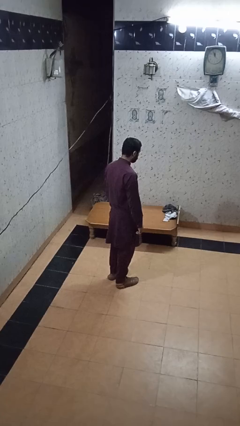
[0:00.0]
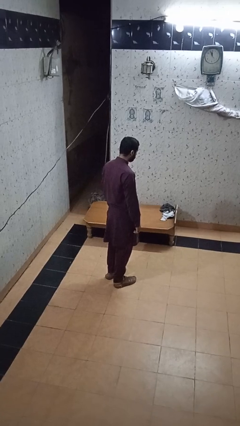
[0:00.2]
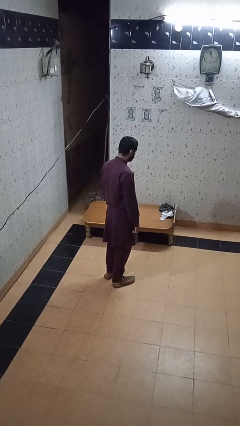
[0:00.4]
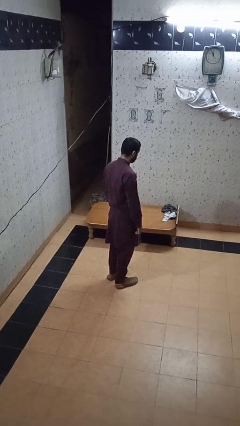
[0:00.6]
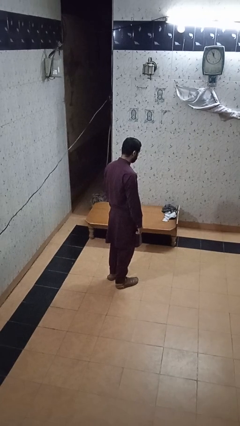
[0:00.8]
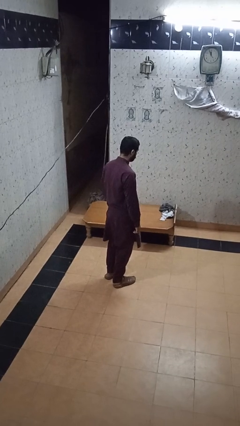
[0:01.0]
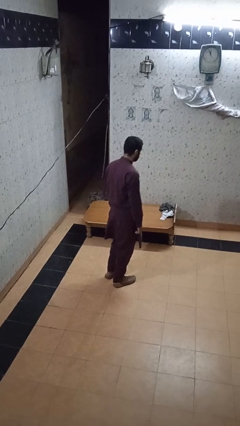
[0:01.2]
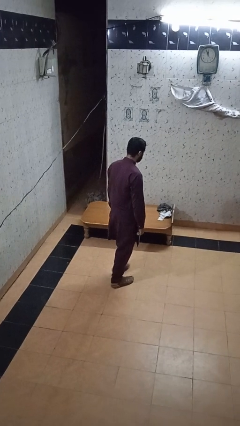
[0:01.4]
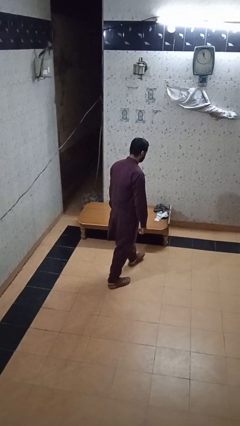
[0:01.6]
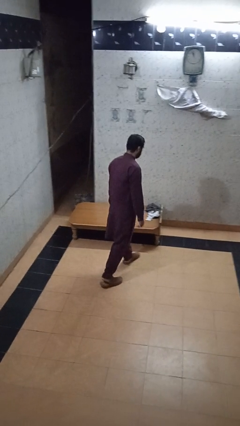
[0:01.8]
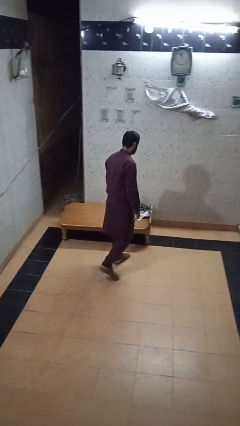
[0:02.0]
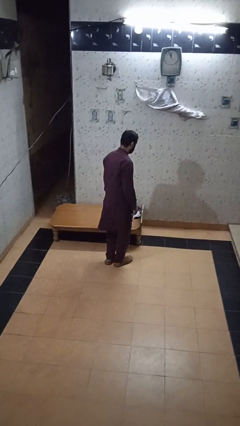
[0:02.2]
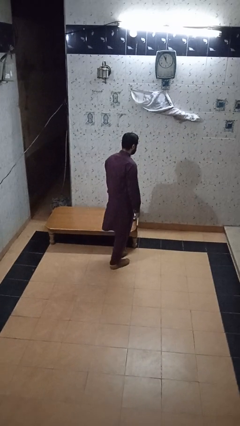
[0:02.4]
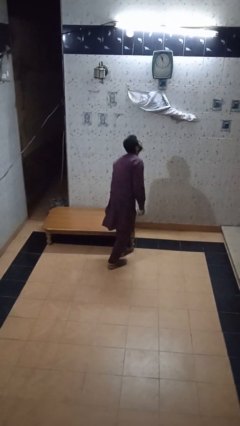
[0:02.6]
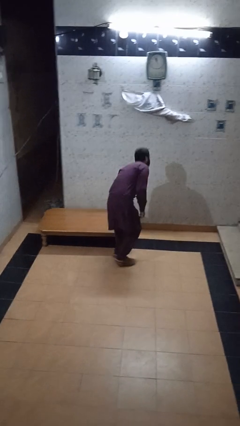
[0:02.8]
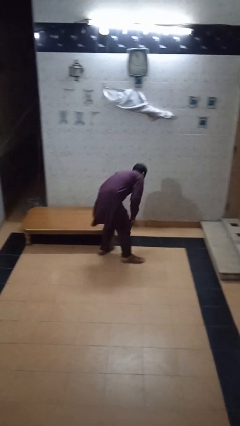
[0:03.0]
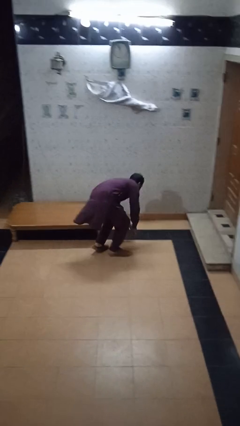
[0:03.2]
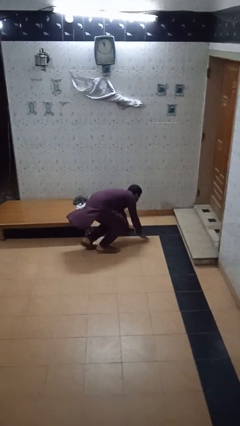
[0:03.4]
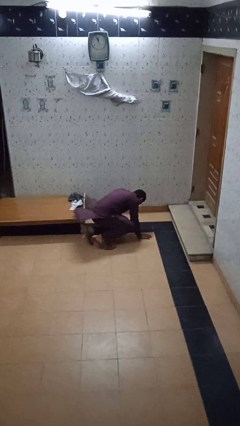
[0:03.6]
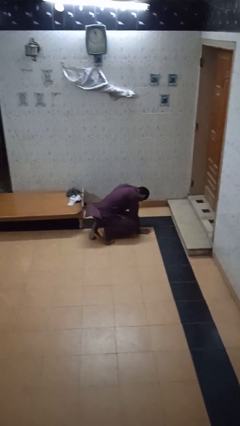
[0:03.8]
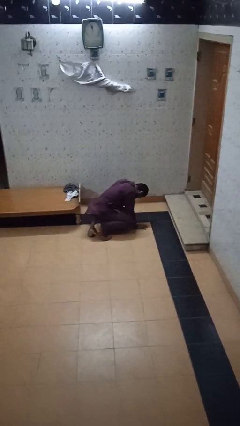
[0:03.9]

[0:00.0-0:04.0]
person trips on object on floor

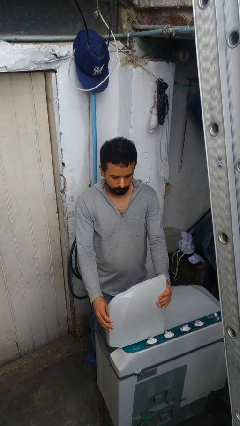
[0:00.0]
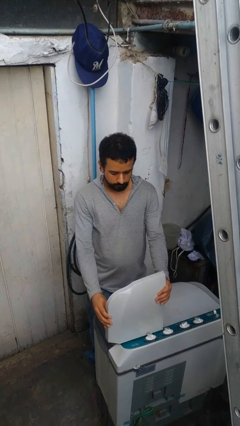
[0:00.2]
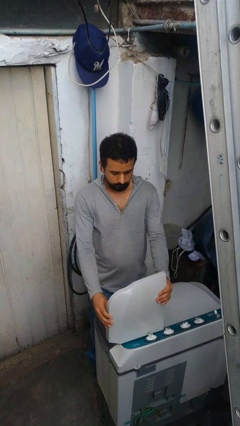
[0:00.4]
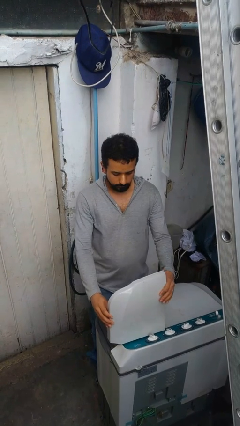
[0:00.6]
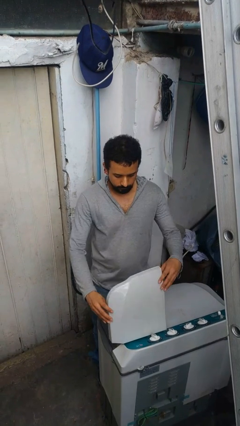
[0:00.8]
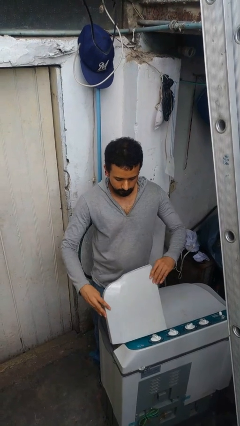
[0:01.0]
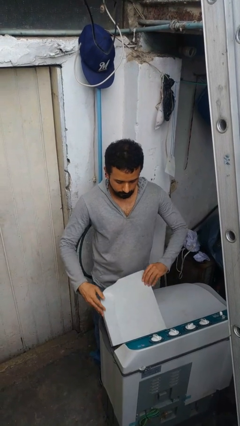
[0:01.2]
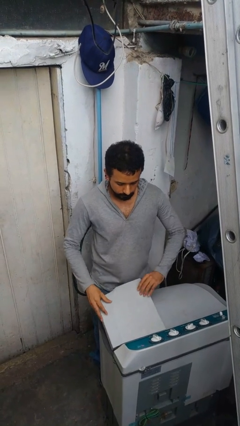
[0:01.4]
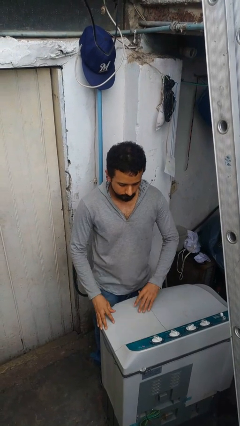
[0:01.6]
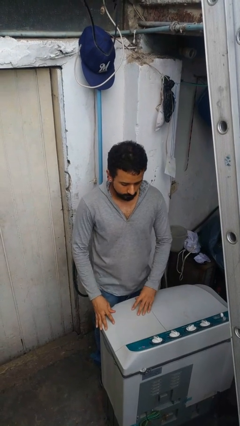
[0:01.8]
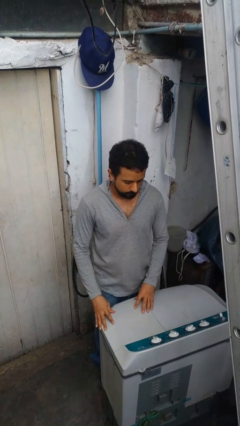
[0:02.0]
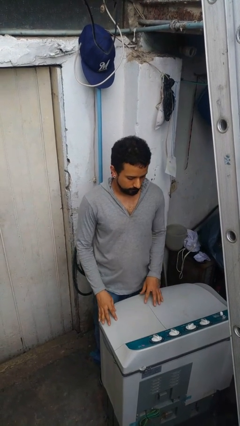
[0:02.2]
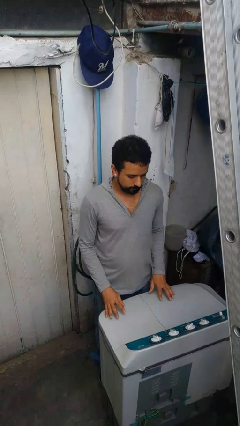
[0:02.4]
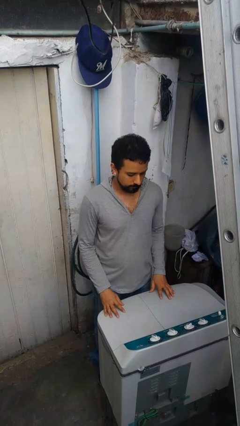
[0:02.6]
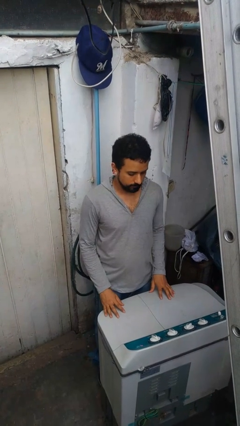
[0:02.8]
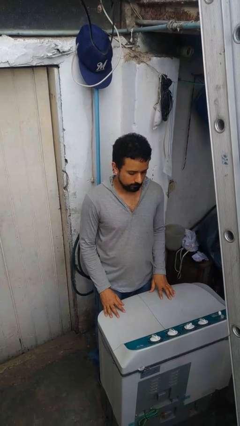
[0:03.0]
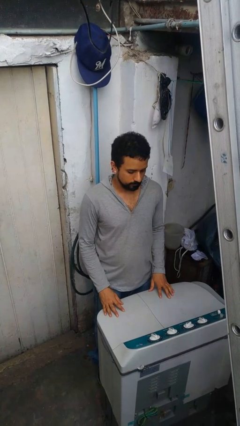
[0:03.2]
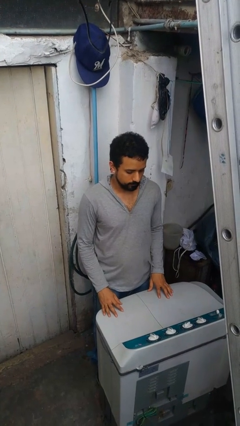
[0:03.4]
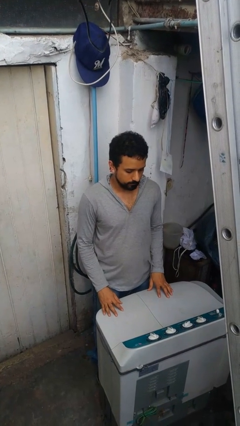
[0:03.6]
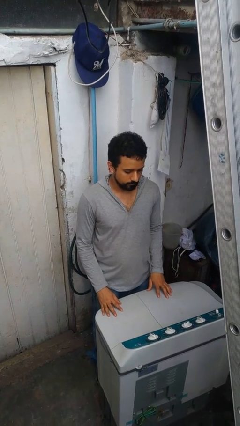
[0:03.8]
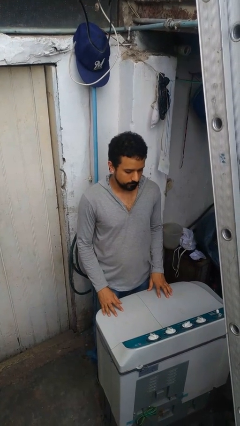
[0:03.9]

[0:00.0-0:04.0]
person closes clothes washer

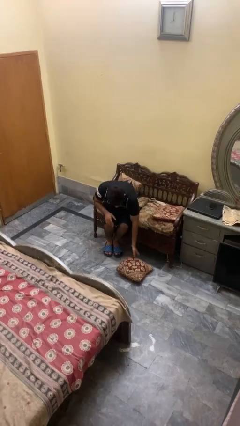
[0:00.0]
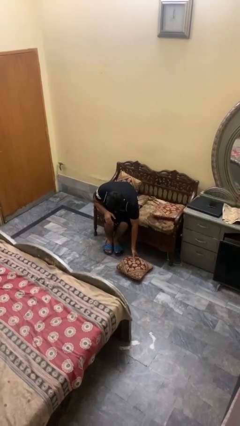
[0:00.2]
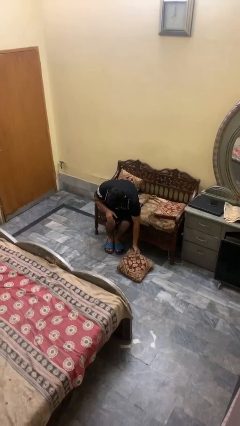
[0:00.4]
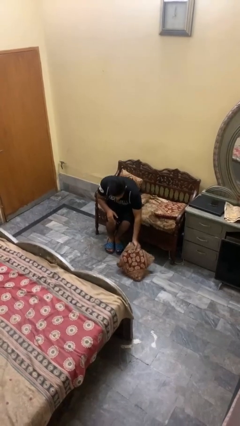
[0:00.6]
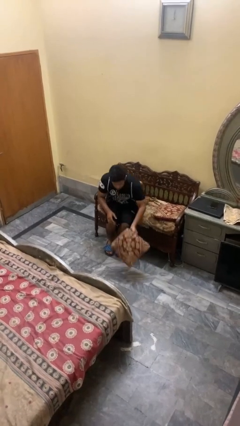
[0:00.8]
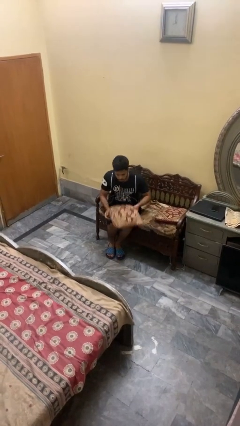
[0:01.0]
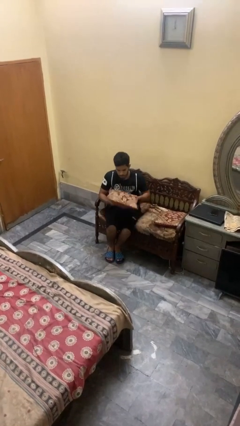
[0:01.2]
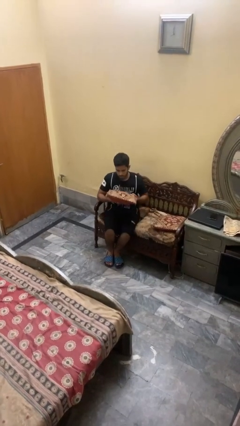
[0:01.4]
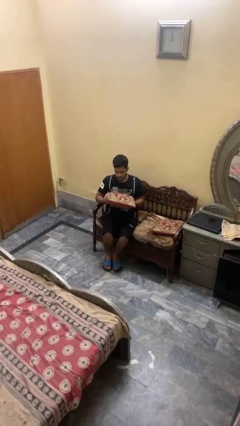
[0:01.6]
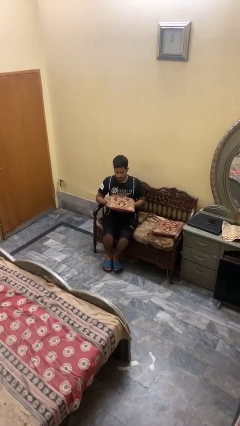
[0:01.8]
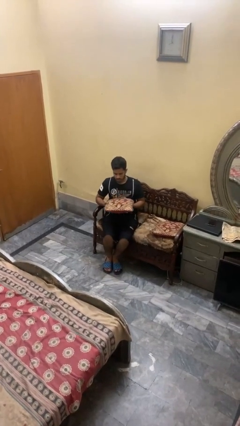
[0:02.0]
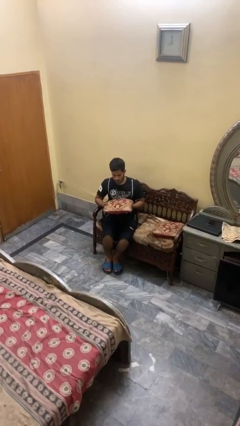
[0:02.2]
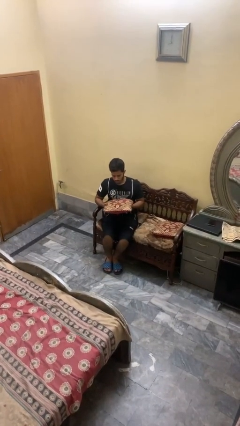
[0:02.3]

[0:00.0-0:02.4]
person picks up object from floor

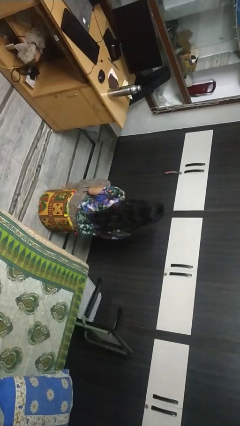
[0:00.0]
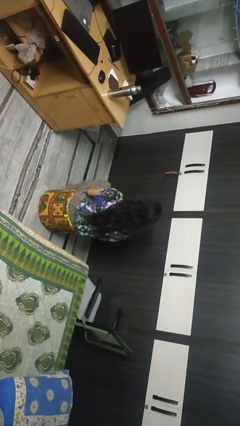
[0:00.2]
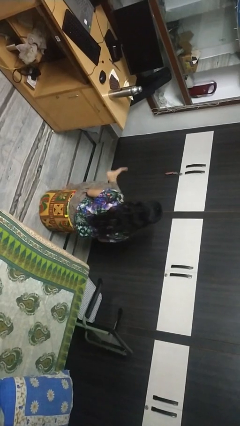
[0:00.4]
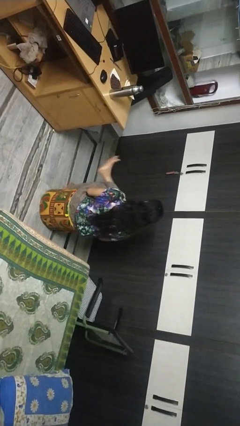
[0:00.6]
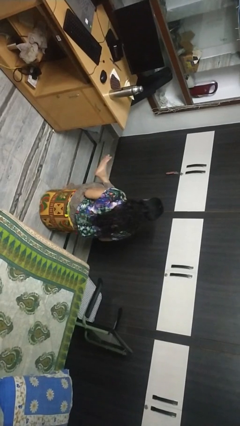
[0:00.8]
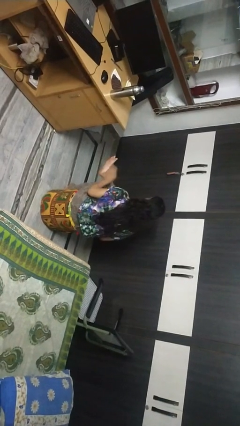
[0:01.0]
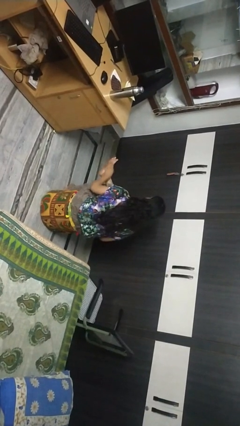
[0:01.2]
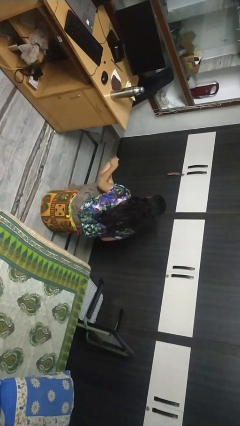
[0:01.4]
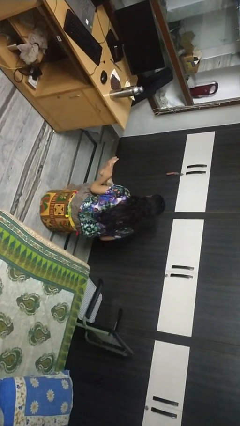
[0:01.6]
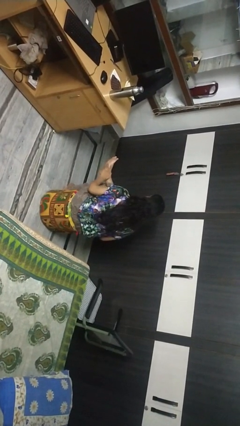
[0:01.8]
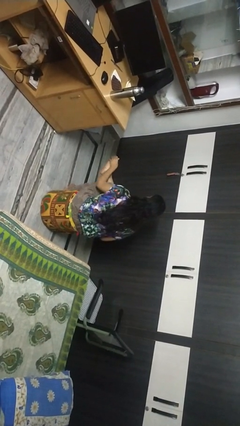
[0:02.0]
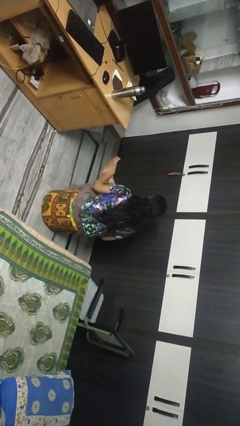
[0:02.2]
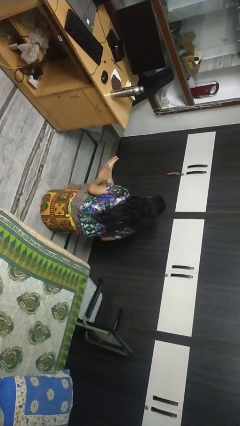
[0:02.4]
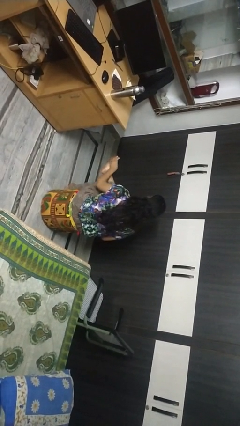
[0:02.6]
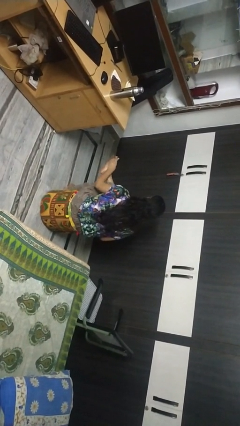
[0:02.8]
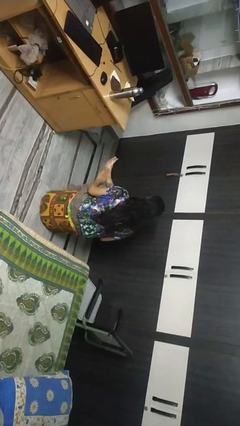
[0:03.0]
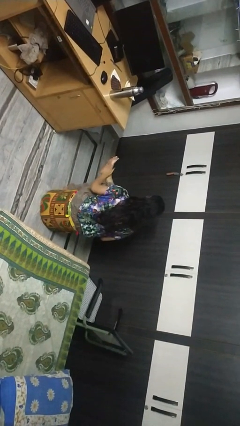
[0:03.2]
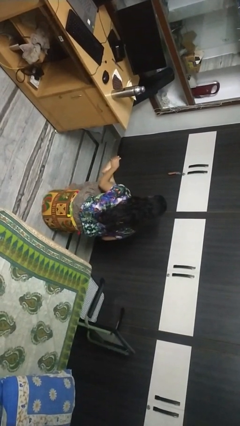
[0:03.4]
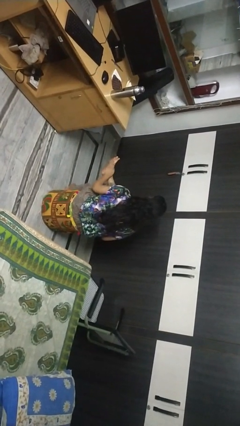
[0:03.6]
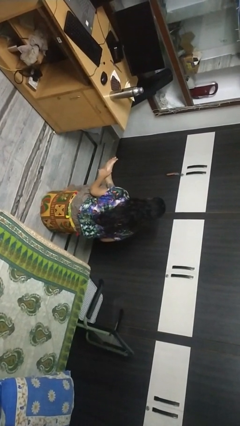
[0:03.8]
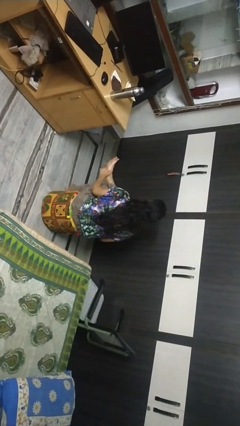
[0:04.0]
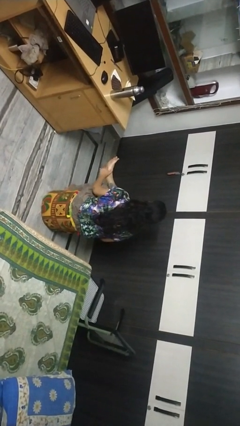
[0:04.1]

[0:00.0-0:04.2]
person rubs foot

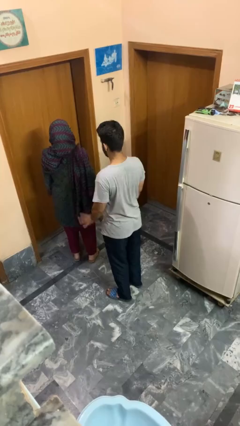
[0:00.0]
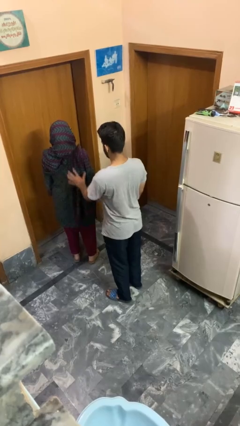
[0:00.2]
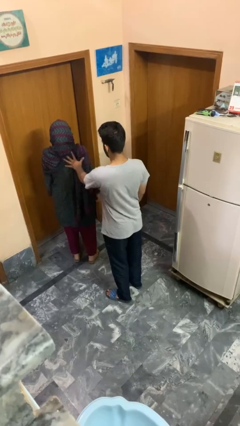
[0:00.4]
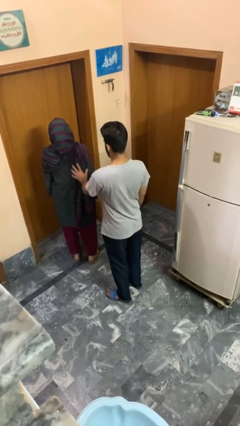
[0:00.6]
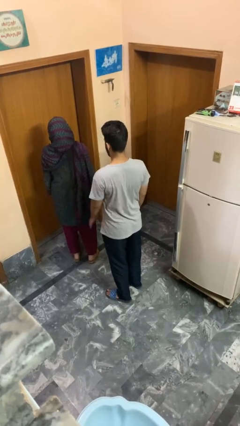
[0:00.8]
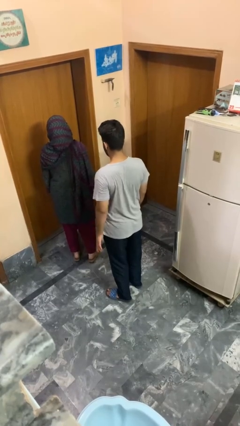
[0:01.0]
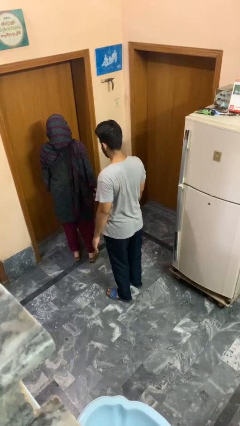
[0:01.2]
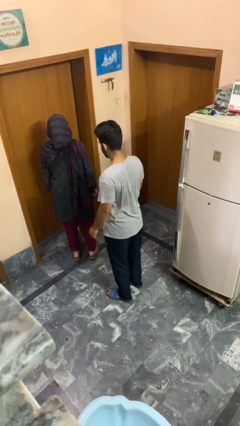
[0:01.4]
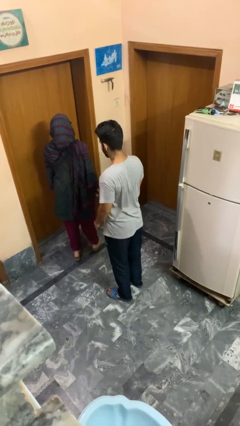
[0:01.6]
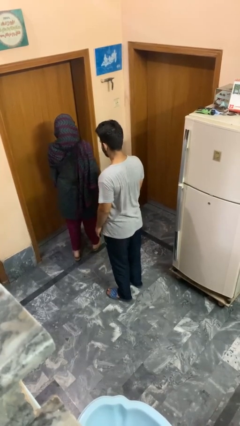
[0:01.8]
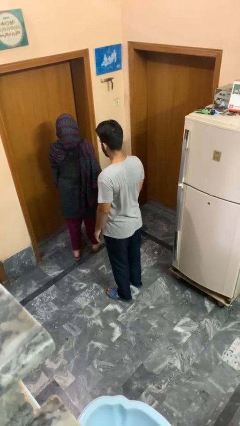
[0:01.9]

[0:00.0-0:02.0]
person shoves person

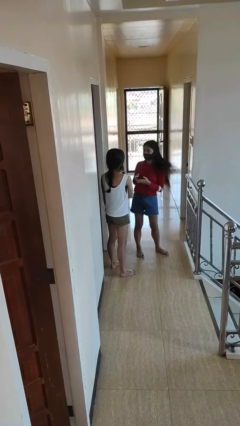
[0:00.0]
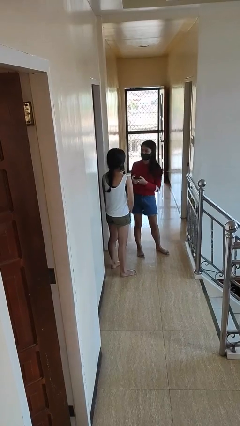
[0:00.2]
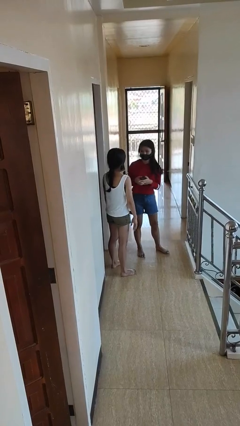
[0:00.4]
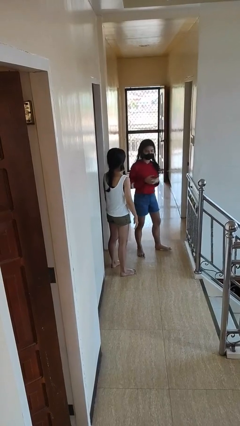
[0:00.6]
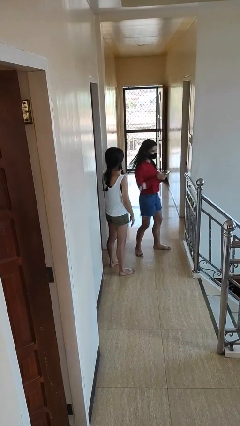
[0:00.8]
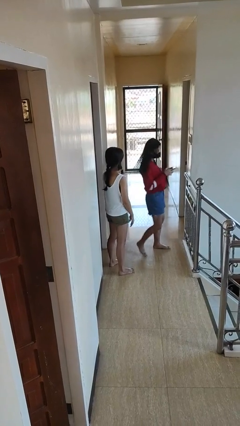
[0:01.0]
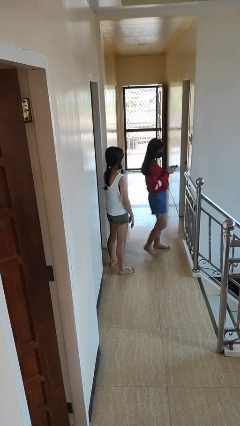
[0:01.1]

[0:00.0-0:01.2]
person spins person around
